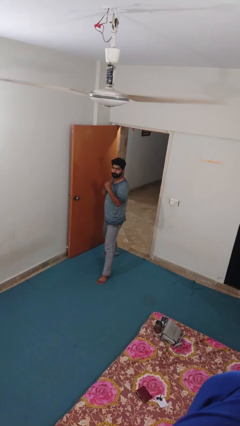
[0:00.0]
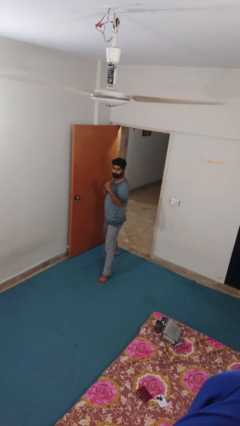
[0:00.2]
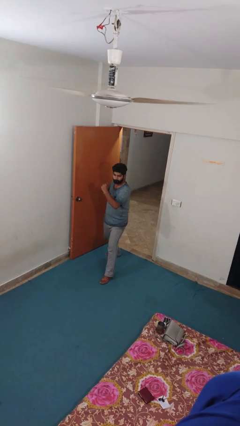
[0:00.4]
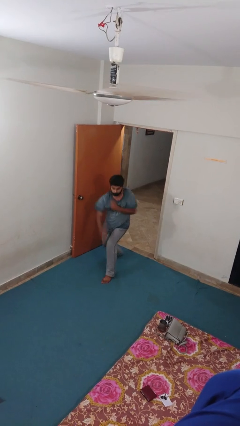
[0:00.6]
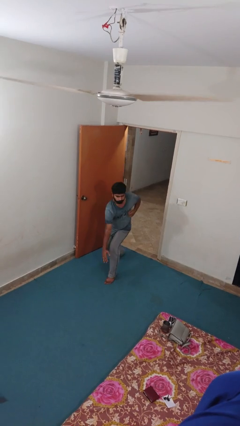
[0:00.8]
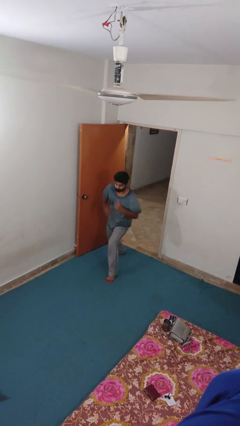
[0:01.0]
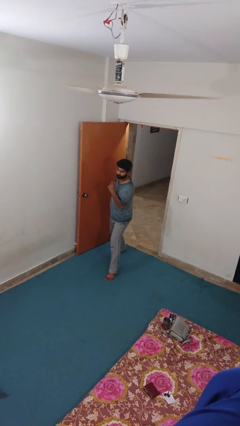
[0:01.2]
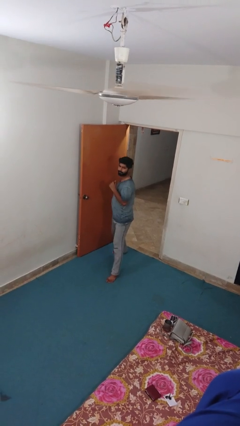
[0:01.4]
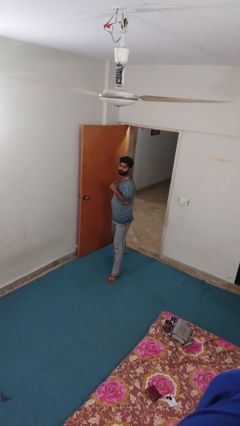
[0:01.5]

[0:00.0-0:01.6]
person karate chop

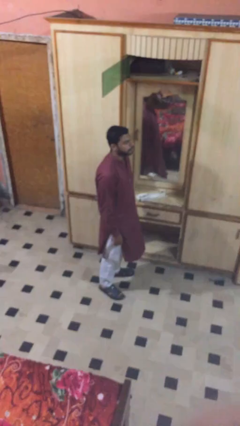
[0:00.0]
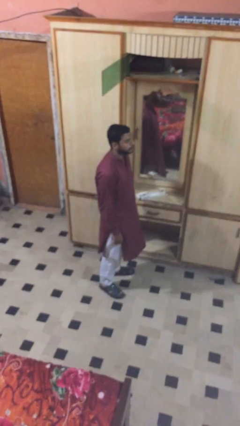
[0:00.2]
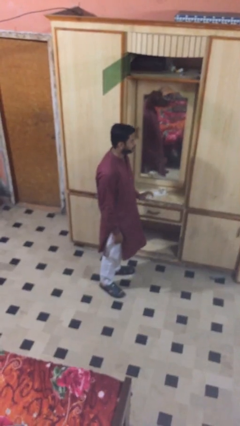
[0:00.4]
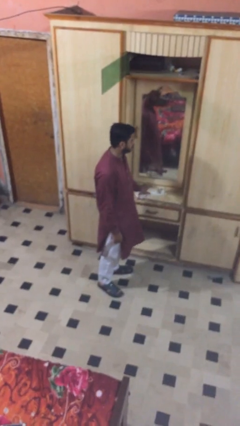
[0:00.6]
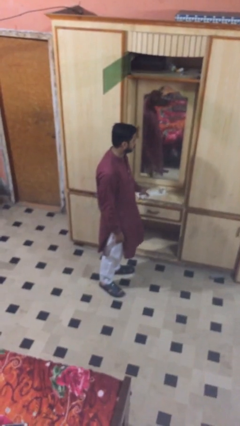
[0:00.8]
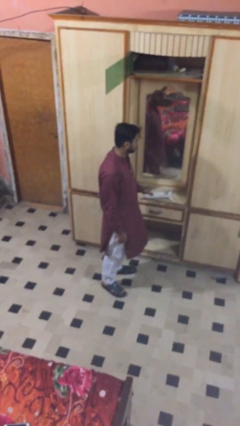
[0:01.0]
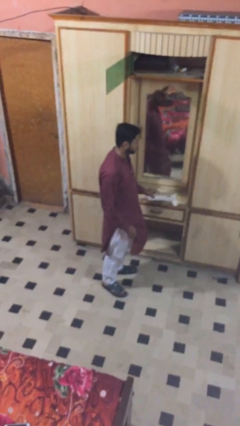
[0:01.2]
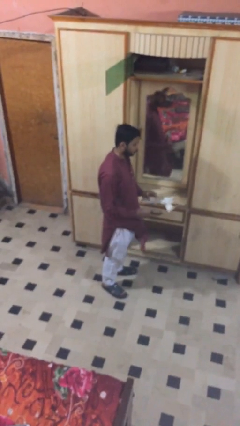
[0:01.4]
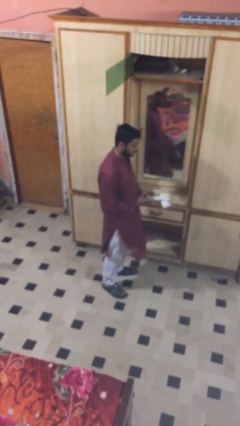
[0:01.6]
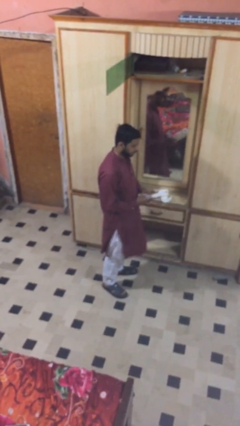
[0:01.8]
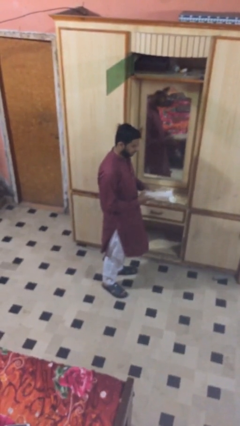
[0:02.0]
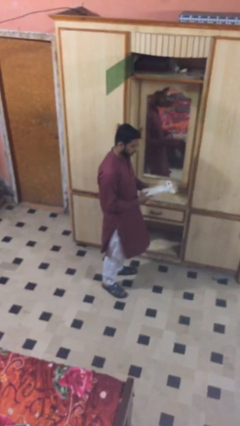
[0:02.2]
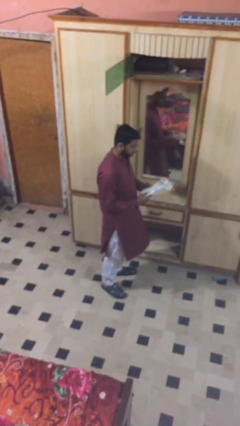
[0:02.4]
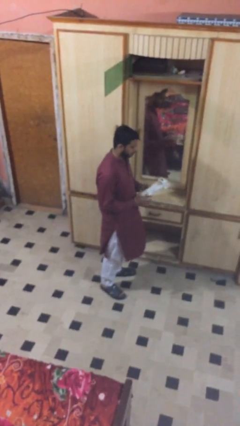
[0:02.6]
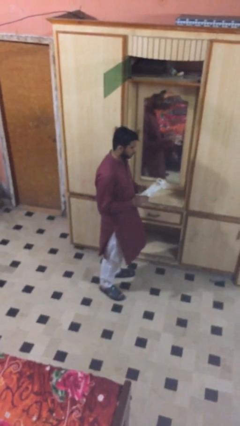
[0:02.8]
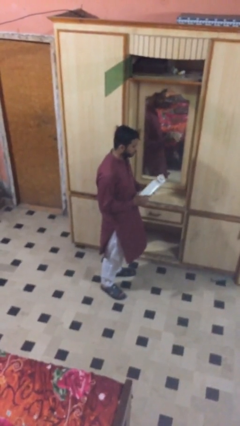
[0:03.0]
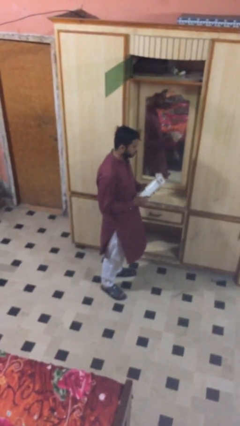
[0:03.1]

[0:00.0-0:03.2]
person picks up object from table

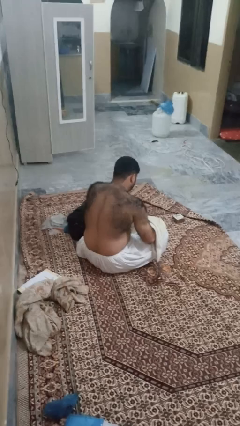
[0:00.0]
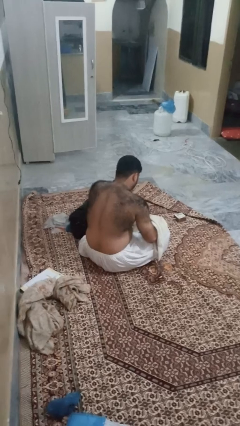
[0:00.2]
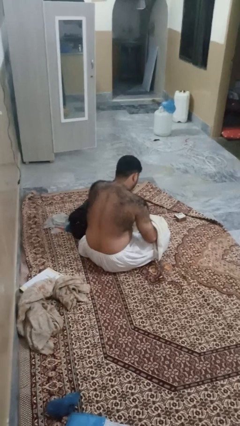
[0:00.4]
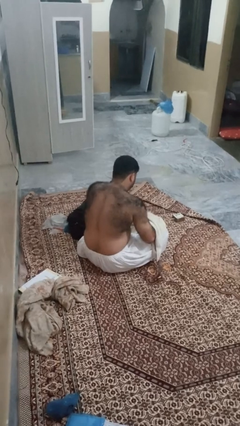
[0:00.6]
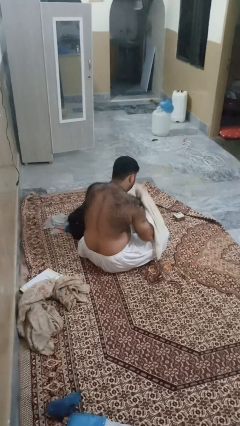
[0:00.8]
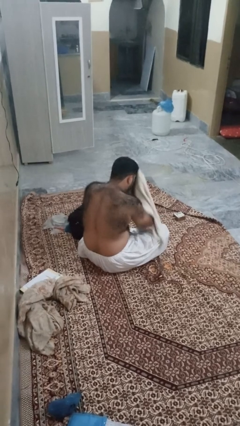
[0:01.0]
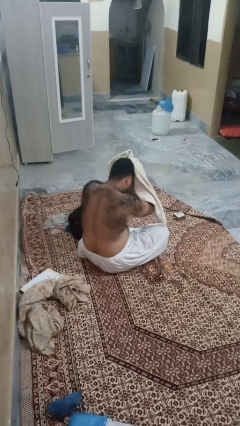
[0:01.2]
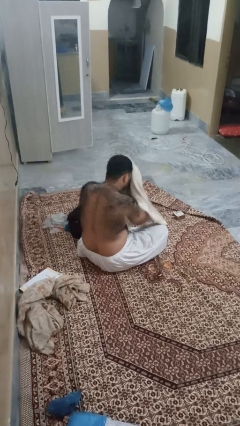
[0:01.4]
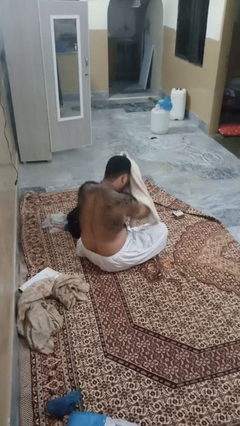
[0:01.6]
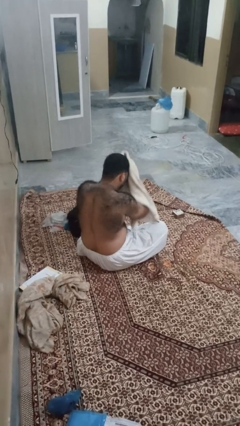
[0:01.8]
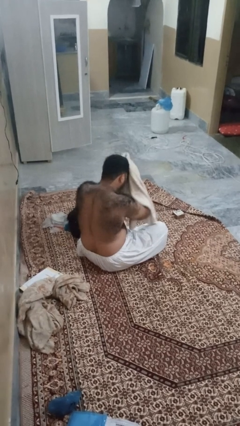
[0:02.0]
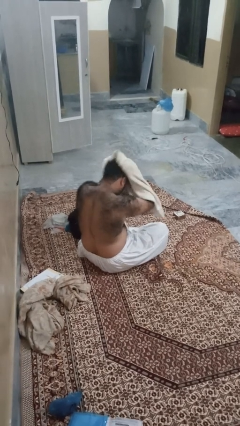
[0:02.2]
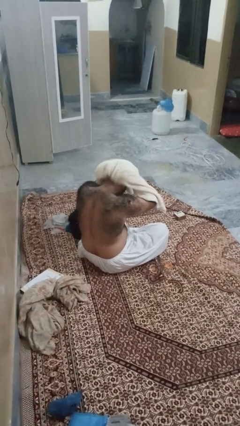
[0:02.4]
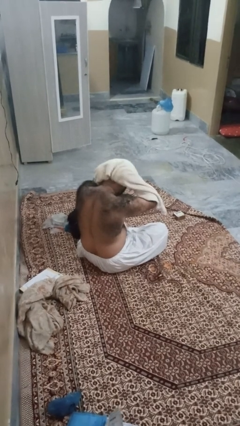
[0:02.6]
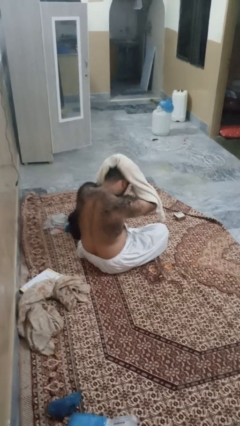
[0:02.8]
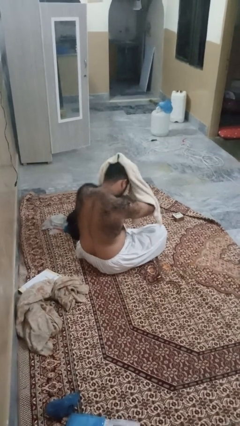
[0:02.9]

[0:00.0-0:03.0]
person dries hair with towel

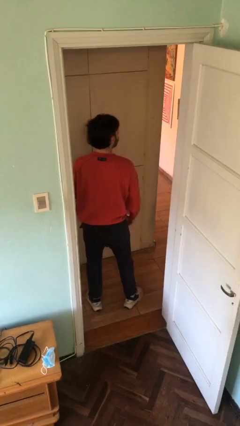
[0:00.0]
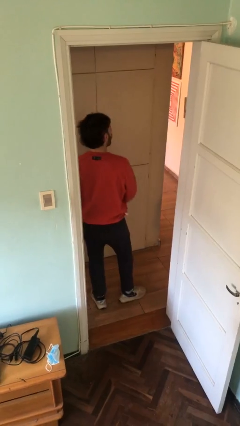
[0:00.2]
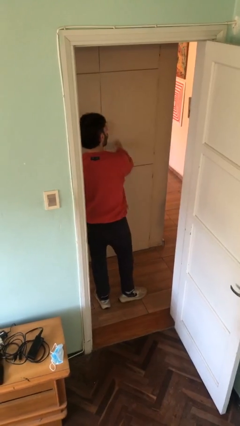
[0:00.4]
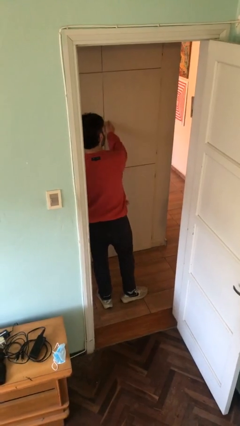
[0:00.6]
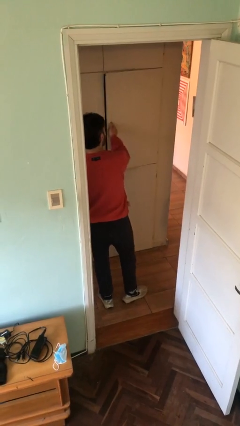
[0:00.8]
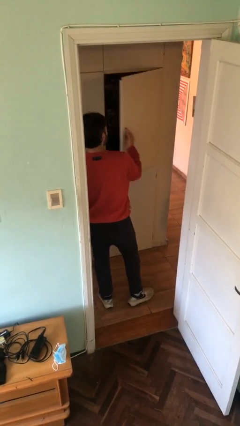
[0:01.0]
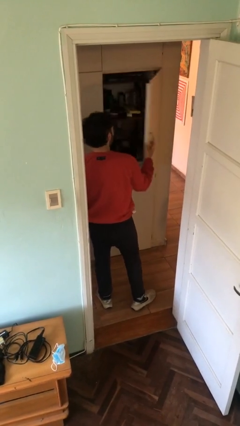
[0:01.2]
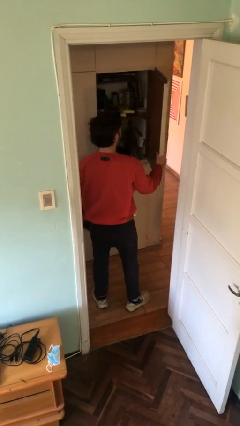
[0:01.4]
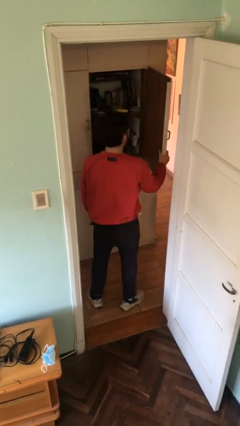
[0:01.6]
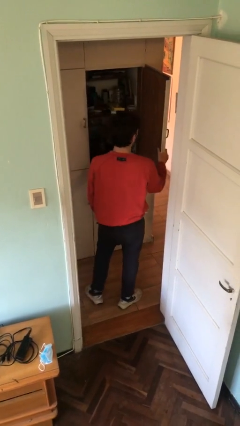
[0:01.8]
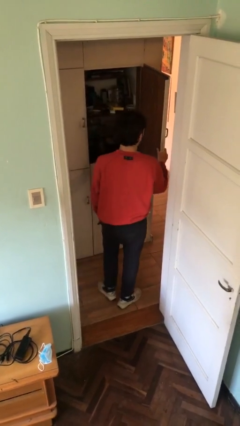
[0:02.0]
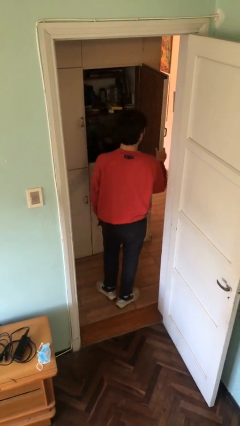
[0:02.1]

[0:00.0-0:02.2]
person opens closet door

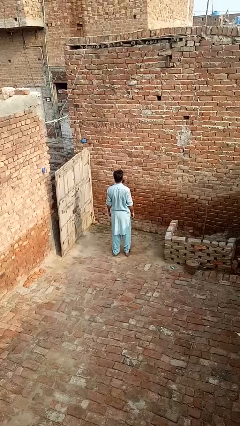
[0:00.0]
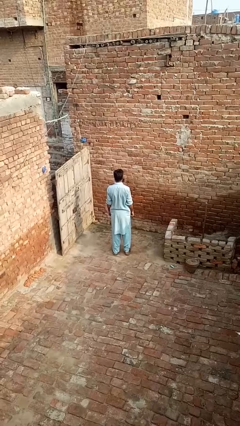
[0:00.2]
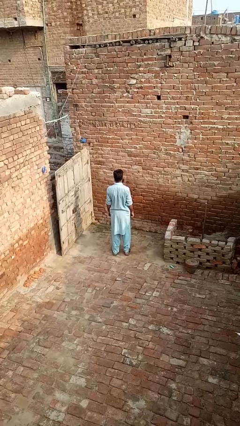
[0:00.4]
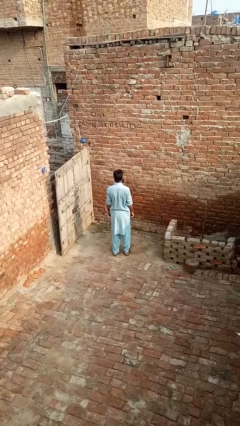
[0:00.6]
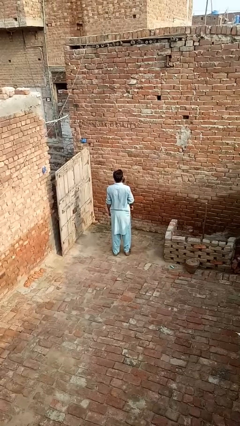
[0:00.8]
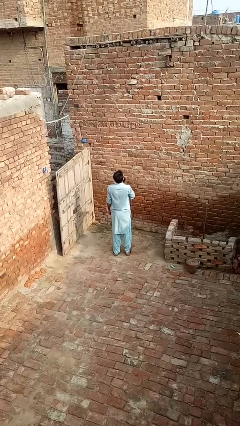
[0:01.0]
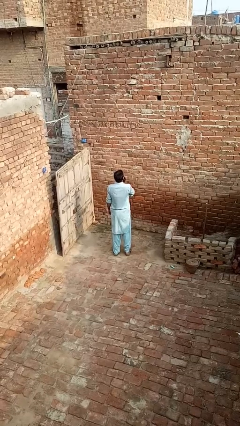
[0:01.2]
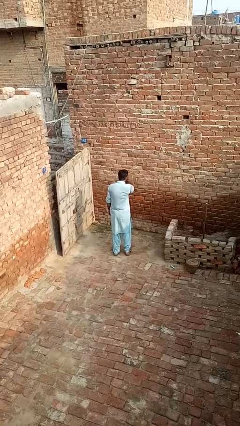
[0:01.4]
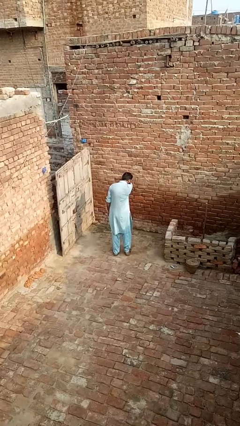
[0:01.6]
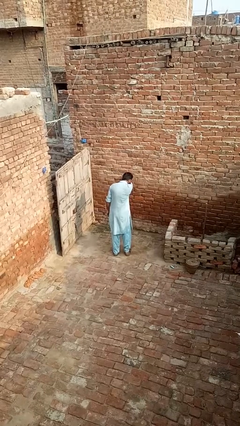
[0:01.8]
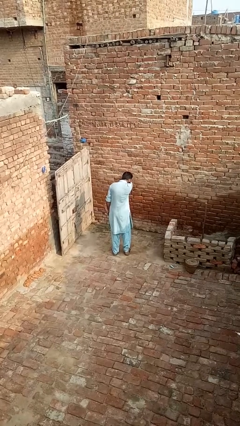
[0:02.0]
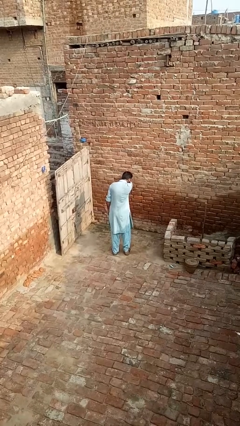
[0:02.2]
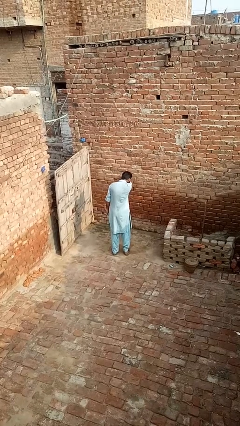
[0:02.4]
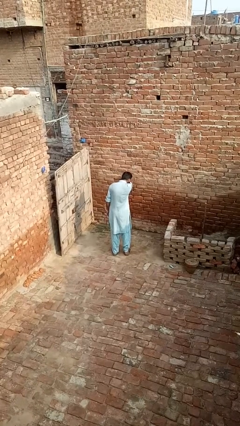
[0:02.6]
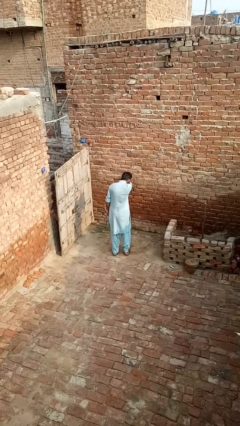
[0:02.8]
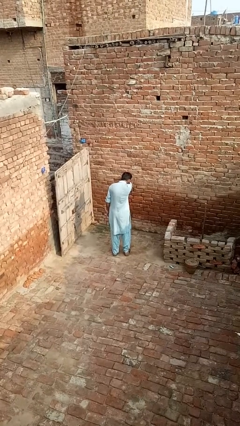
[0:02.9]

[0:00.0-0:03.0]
person sneezes into arm

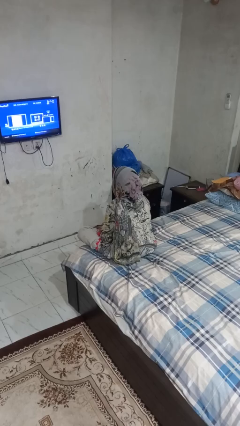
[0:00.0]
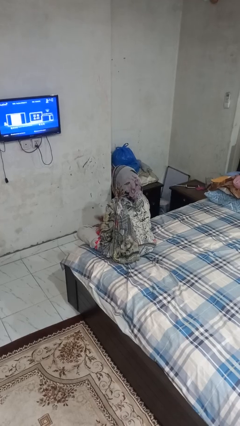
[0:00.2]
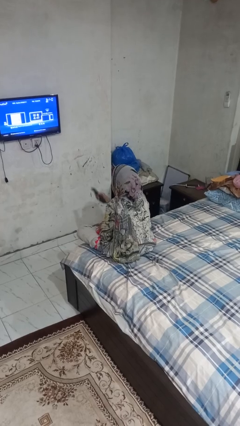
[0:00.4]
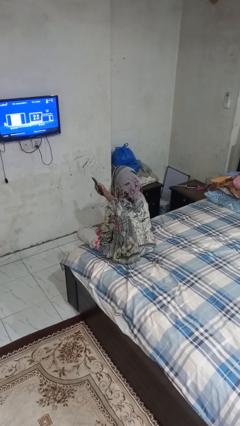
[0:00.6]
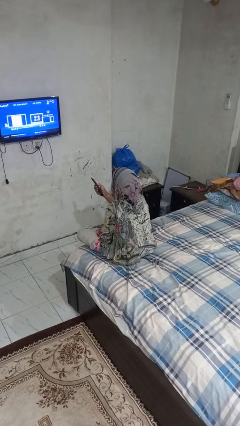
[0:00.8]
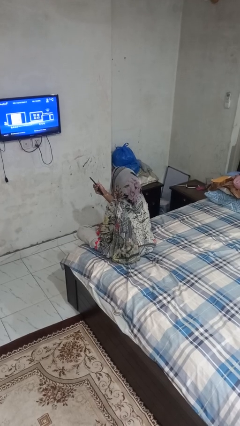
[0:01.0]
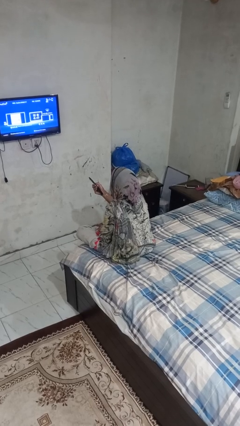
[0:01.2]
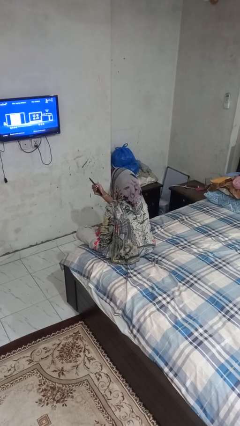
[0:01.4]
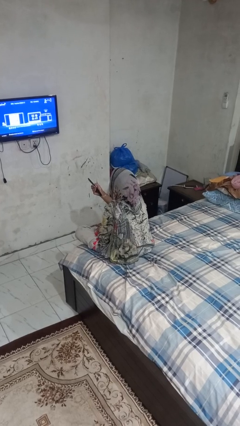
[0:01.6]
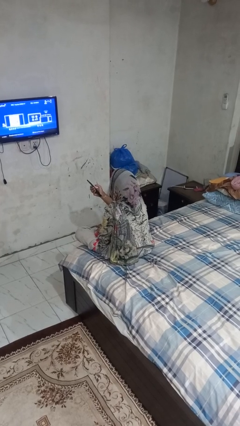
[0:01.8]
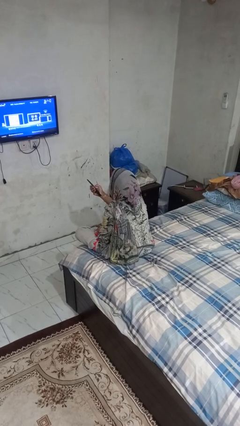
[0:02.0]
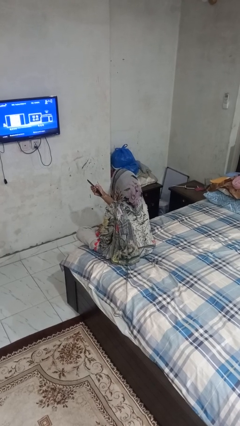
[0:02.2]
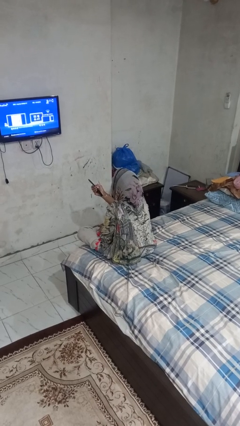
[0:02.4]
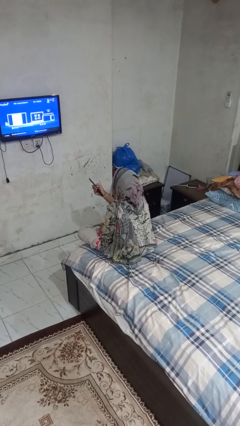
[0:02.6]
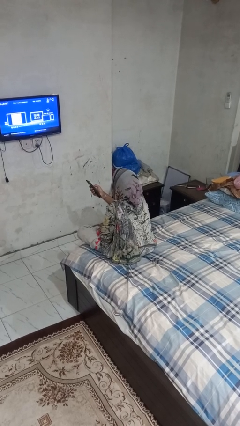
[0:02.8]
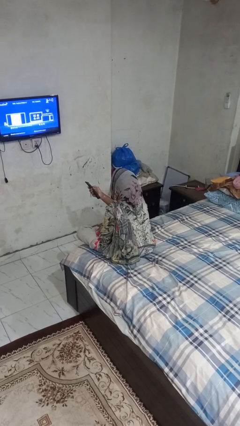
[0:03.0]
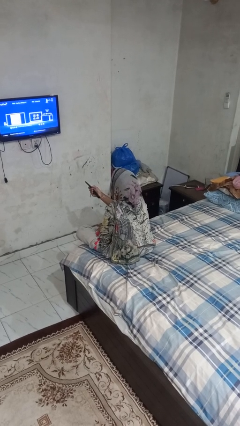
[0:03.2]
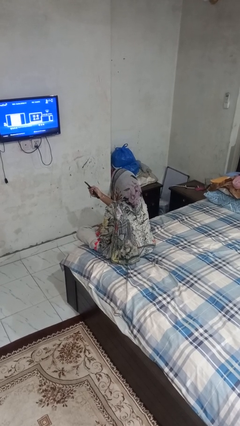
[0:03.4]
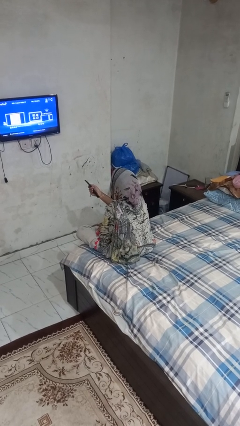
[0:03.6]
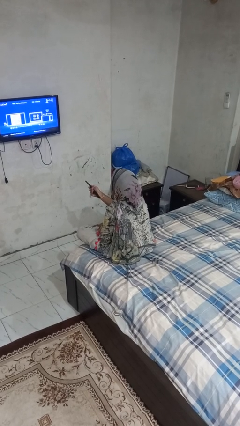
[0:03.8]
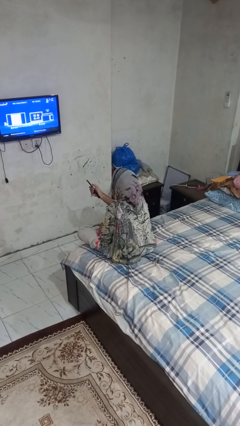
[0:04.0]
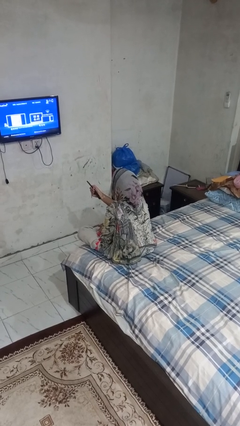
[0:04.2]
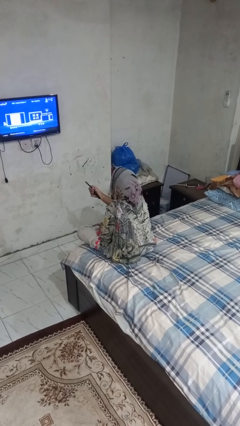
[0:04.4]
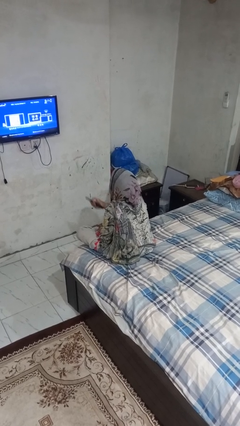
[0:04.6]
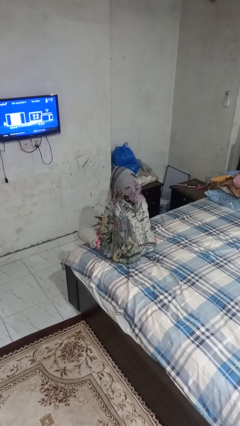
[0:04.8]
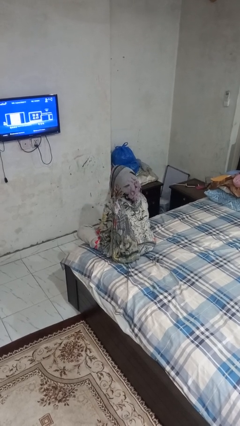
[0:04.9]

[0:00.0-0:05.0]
person uses television remote
